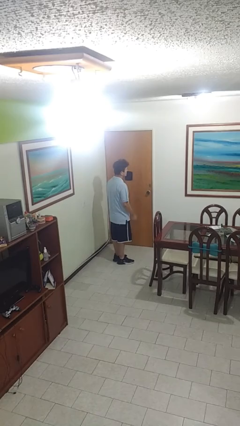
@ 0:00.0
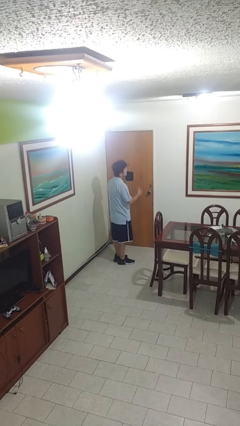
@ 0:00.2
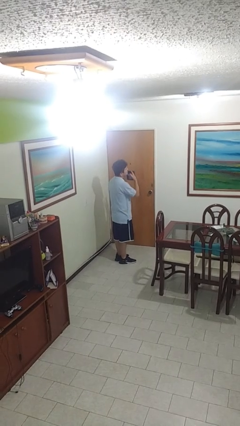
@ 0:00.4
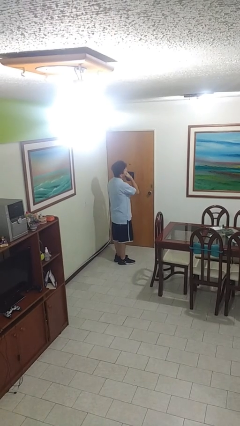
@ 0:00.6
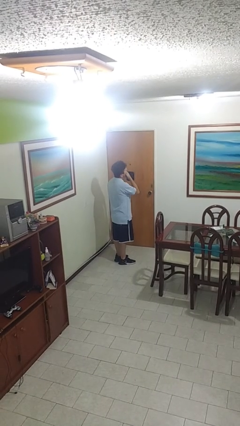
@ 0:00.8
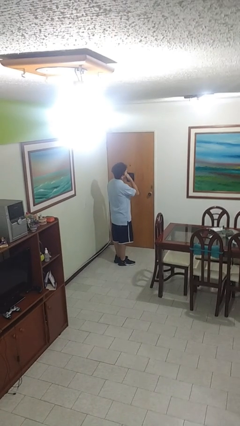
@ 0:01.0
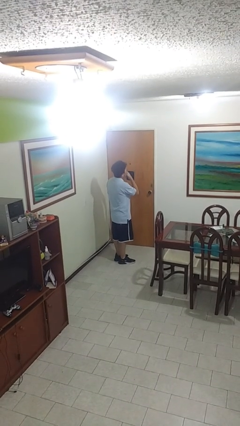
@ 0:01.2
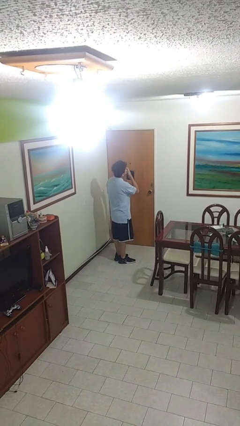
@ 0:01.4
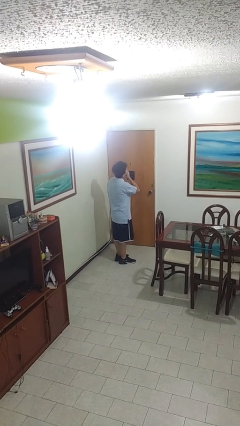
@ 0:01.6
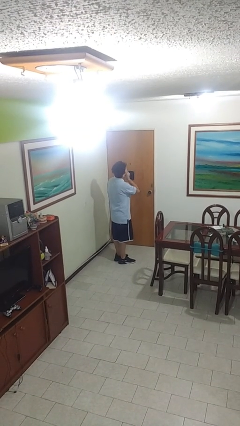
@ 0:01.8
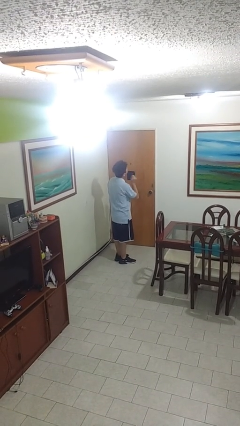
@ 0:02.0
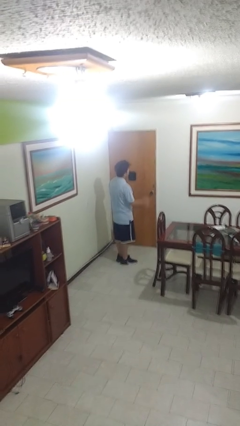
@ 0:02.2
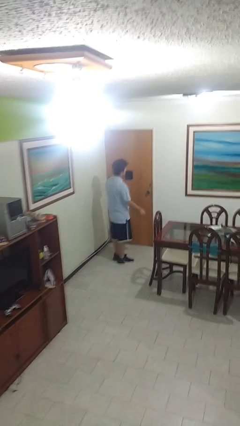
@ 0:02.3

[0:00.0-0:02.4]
person strokes chin

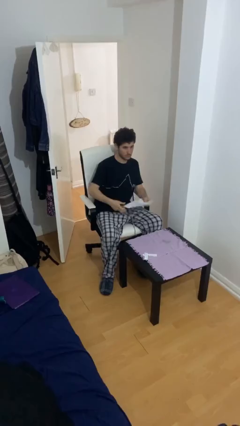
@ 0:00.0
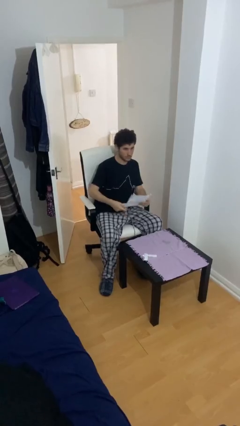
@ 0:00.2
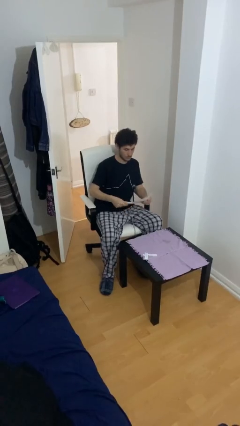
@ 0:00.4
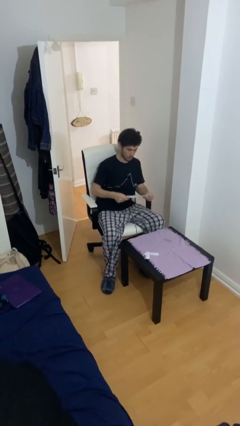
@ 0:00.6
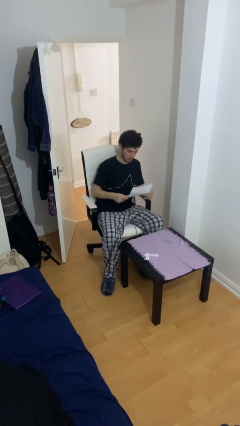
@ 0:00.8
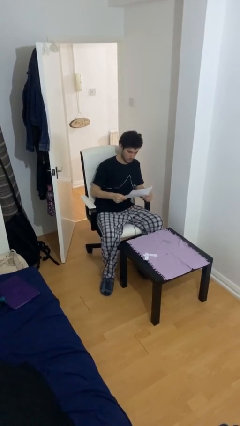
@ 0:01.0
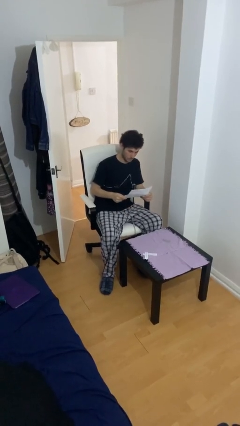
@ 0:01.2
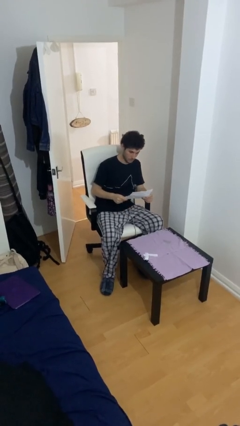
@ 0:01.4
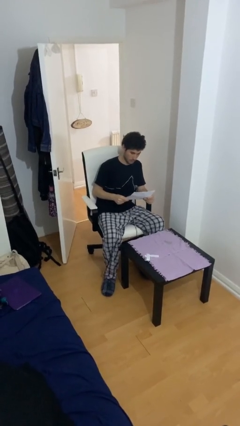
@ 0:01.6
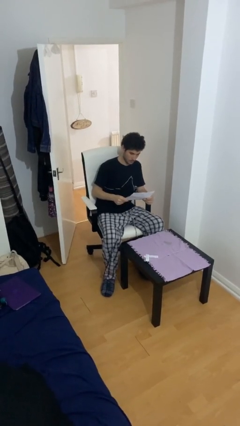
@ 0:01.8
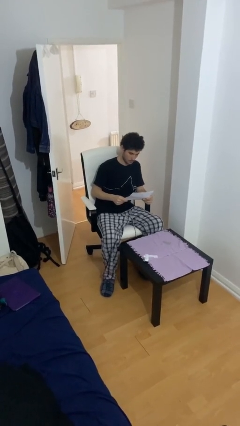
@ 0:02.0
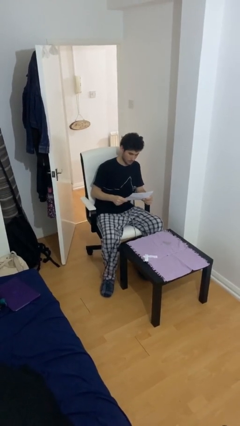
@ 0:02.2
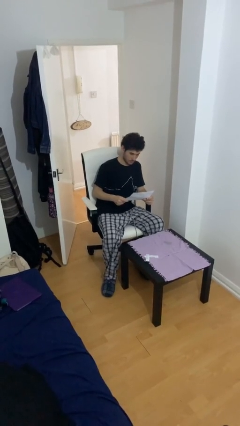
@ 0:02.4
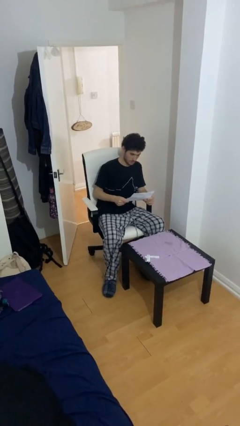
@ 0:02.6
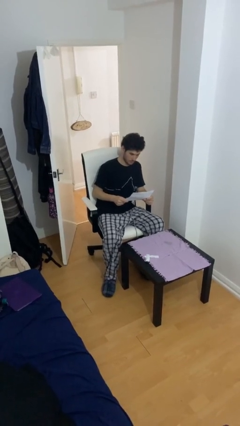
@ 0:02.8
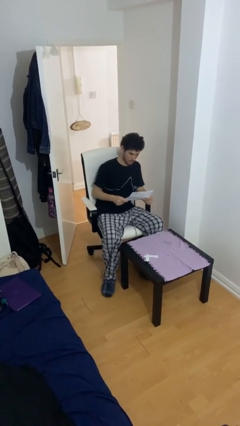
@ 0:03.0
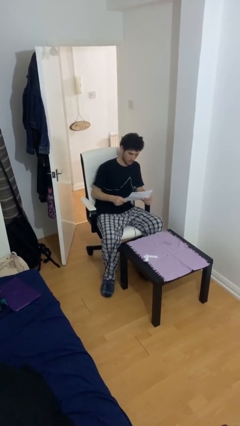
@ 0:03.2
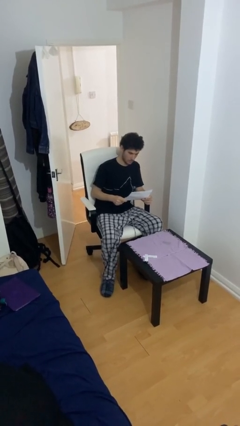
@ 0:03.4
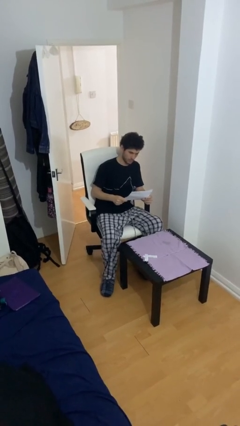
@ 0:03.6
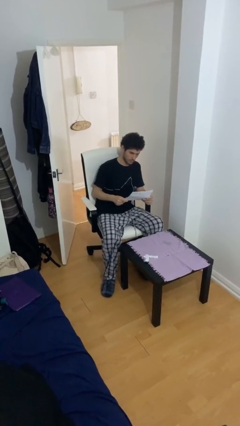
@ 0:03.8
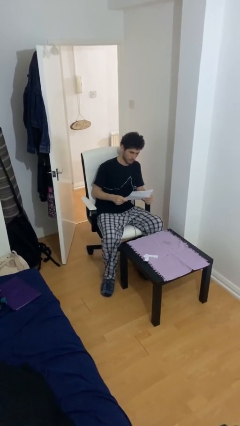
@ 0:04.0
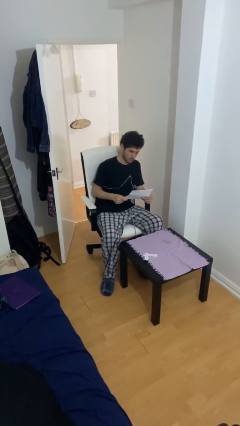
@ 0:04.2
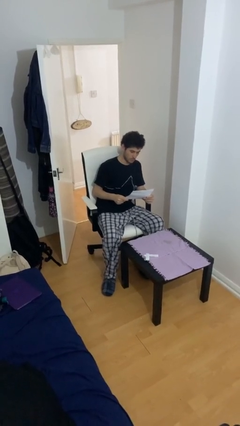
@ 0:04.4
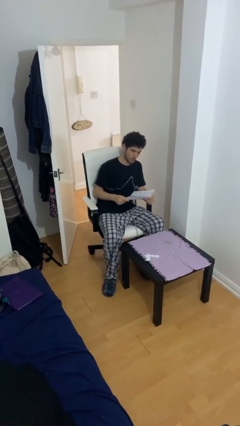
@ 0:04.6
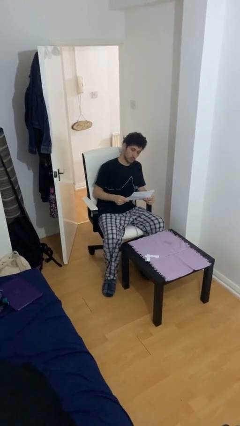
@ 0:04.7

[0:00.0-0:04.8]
person reads document

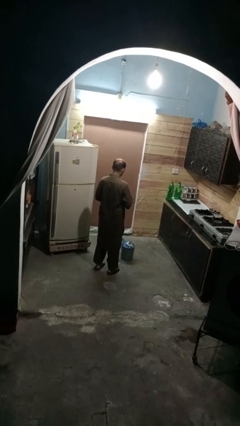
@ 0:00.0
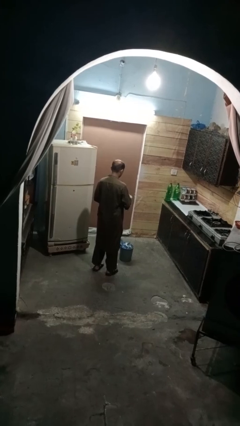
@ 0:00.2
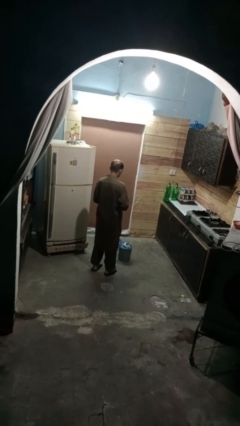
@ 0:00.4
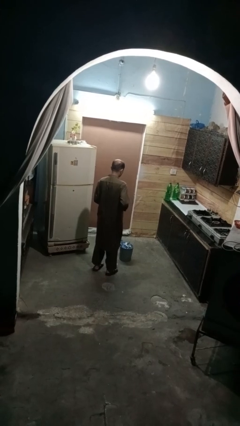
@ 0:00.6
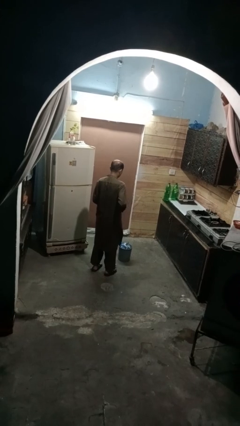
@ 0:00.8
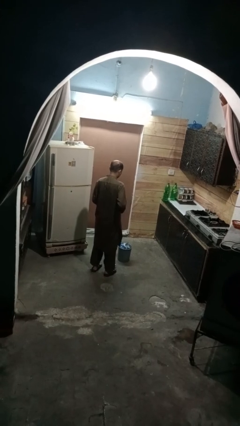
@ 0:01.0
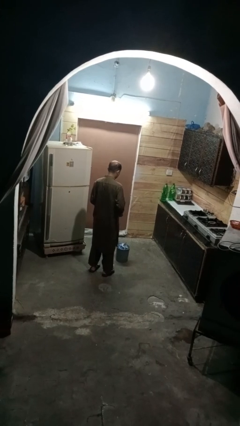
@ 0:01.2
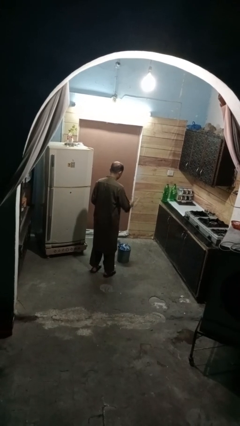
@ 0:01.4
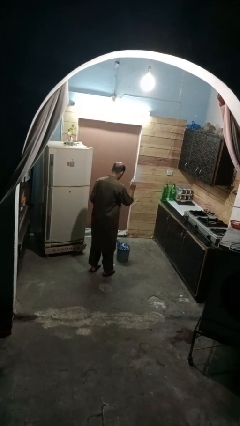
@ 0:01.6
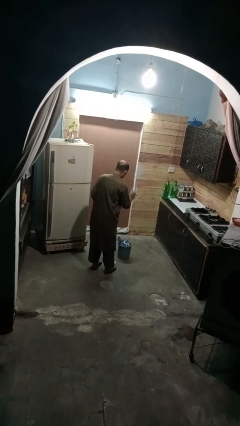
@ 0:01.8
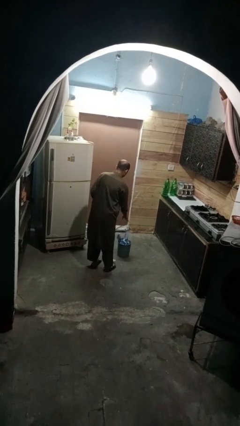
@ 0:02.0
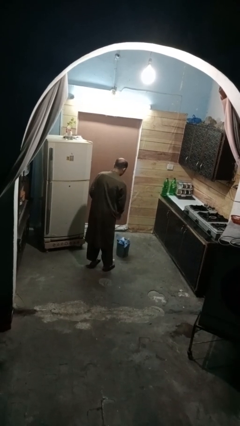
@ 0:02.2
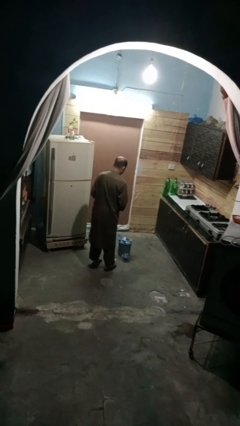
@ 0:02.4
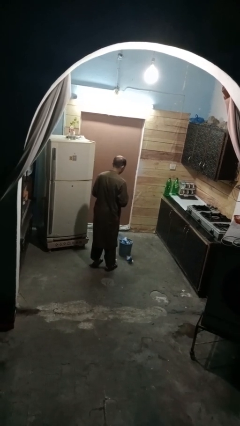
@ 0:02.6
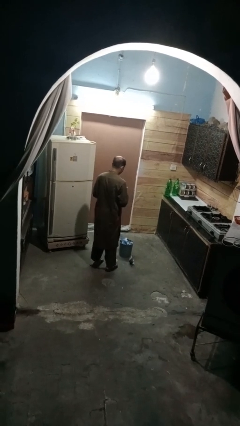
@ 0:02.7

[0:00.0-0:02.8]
person discards trash

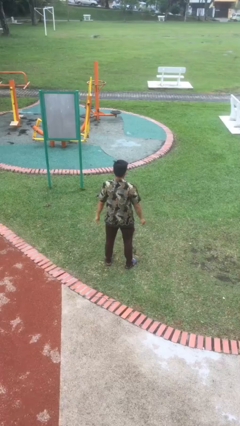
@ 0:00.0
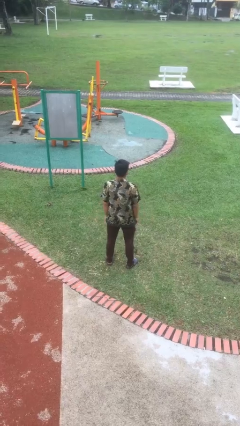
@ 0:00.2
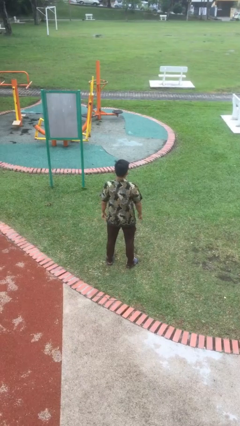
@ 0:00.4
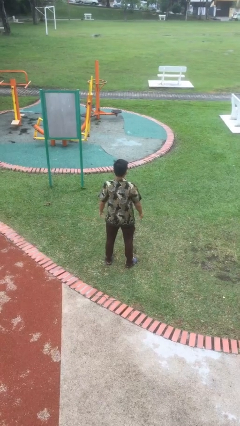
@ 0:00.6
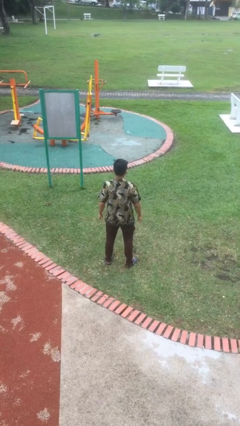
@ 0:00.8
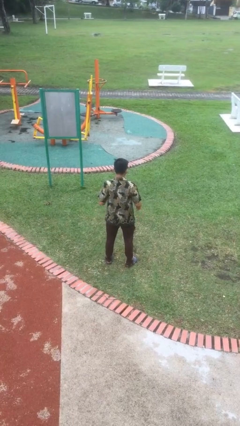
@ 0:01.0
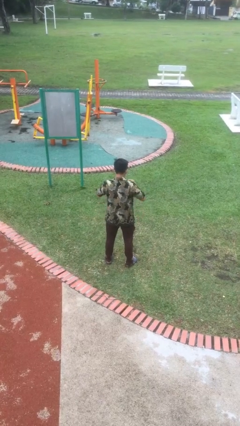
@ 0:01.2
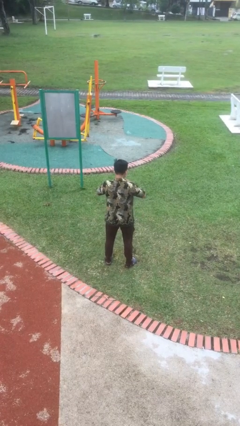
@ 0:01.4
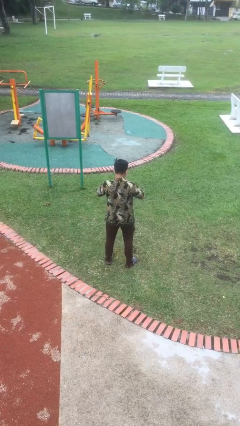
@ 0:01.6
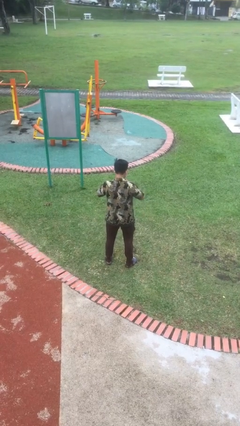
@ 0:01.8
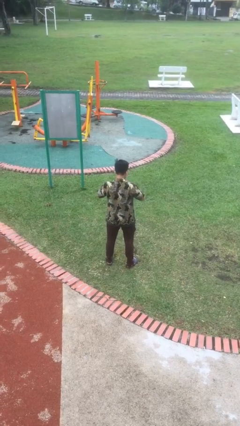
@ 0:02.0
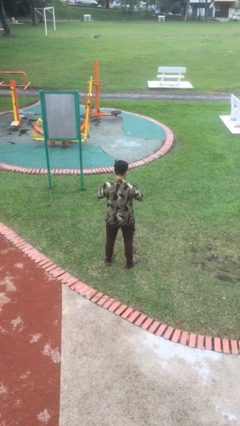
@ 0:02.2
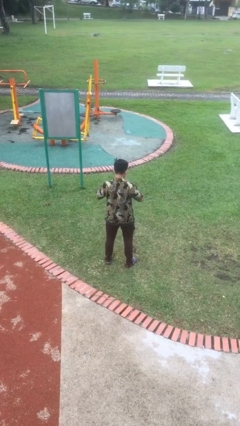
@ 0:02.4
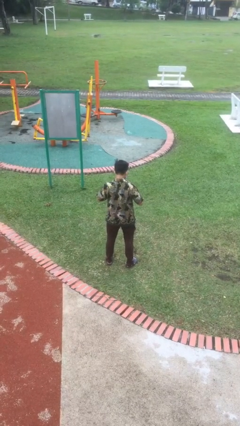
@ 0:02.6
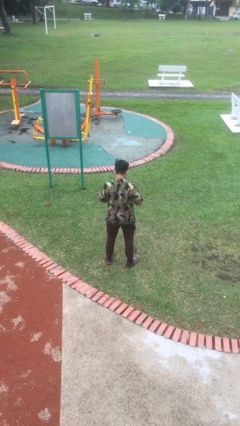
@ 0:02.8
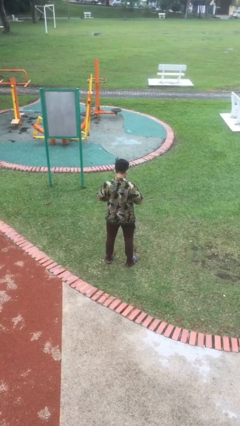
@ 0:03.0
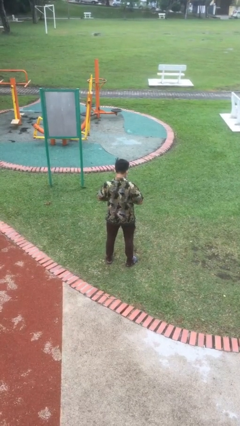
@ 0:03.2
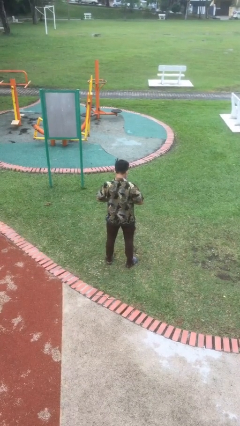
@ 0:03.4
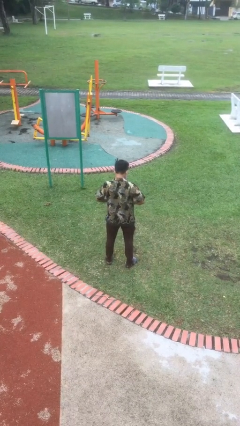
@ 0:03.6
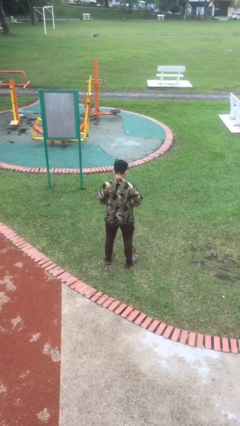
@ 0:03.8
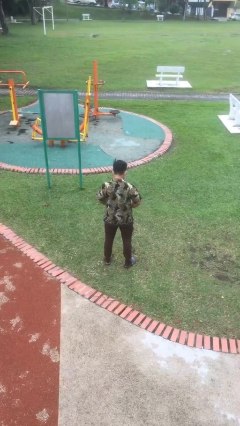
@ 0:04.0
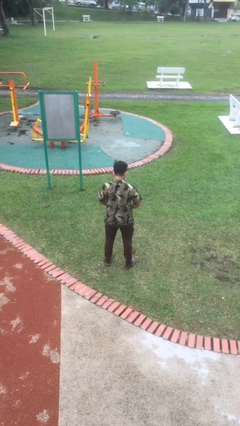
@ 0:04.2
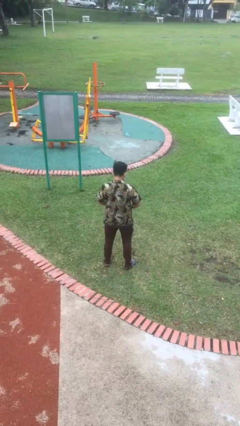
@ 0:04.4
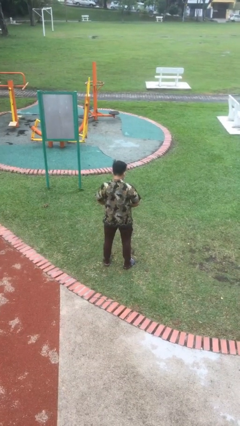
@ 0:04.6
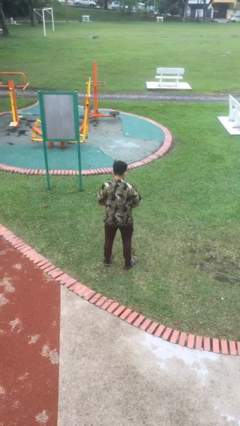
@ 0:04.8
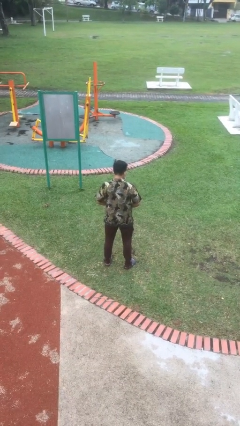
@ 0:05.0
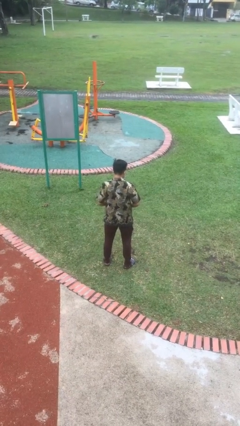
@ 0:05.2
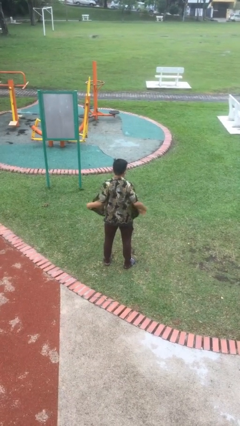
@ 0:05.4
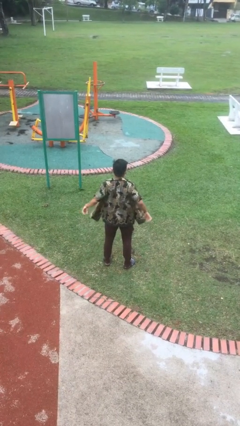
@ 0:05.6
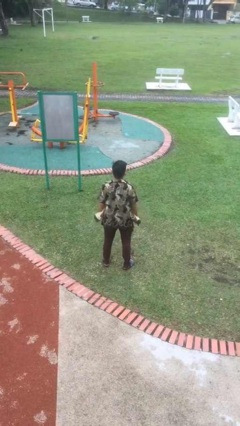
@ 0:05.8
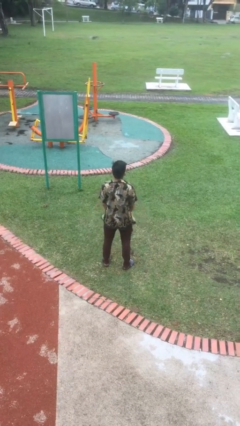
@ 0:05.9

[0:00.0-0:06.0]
person unbuttons shirt

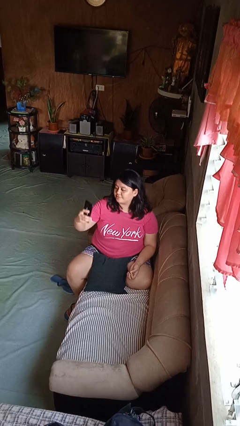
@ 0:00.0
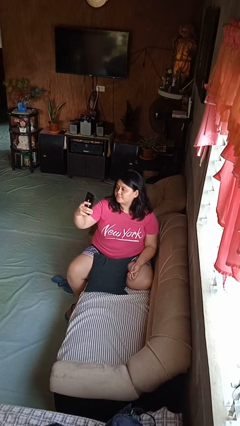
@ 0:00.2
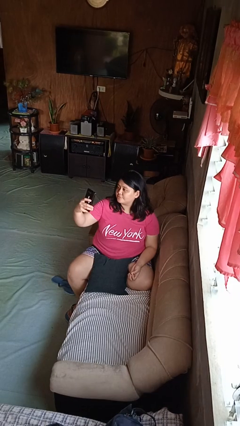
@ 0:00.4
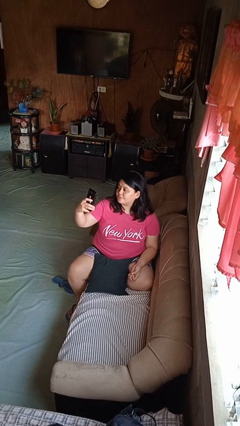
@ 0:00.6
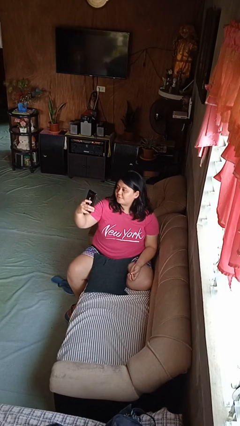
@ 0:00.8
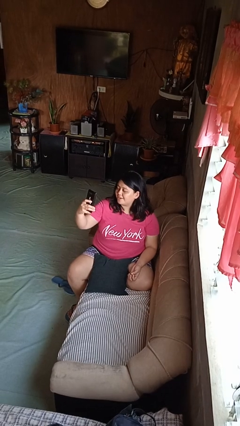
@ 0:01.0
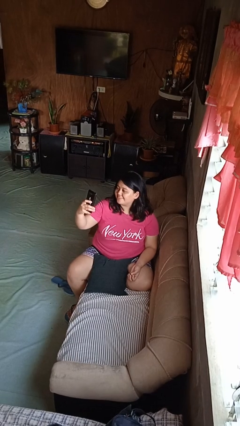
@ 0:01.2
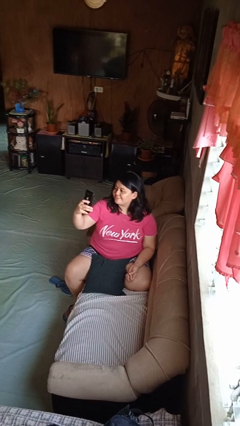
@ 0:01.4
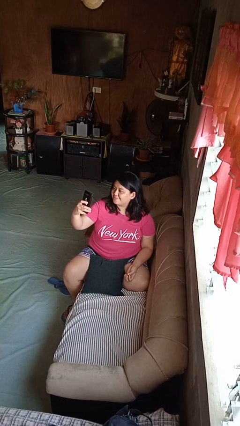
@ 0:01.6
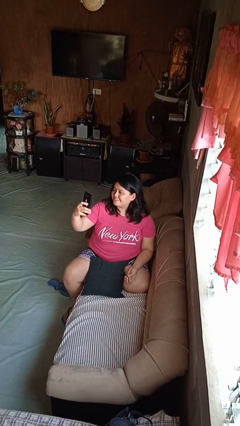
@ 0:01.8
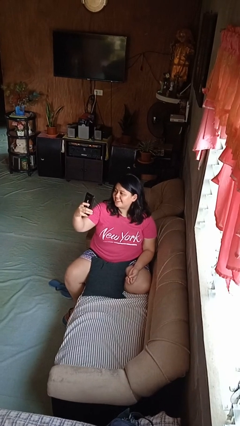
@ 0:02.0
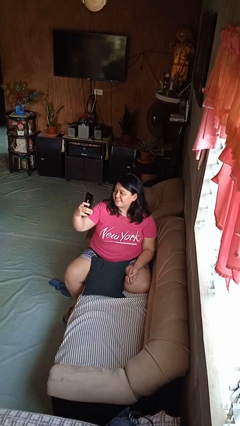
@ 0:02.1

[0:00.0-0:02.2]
person takes selfie
